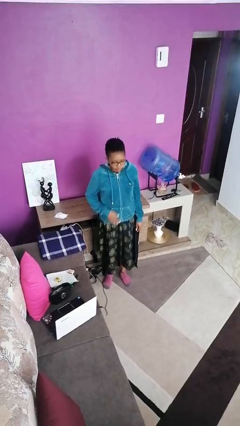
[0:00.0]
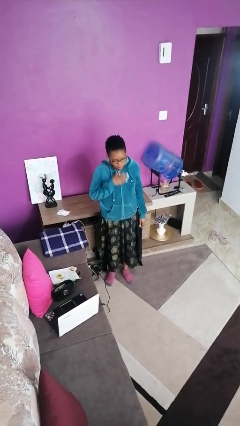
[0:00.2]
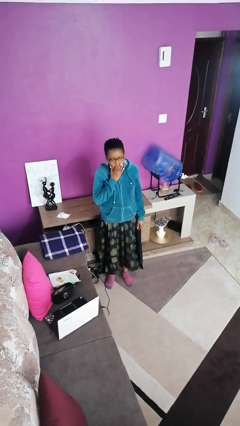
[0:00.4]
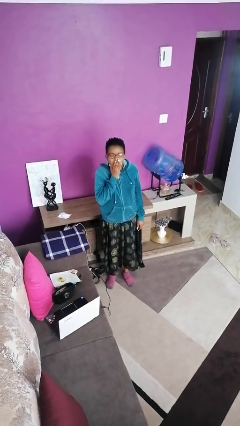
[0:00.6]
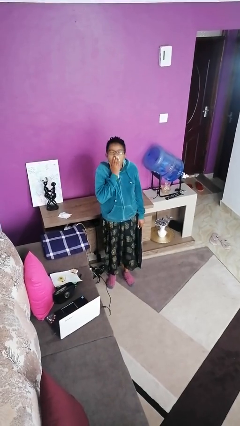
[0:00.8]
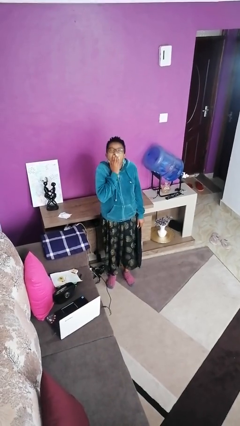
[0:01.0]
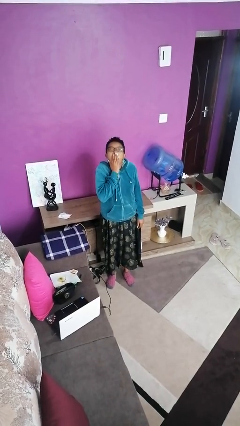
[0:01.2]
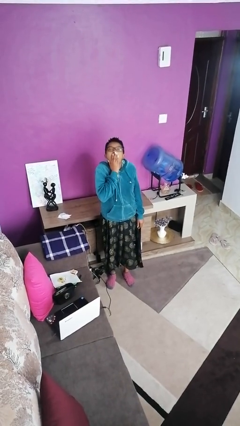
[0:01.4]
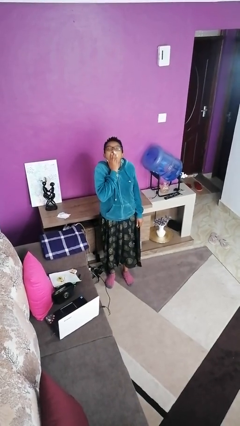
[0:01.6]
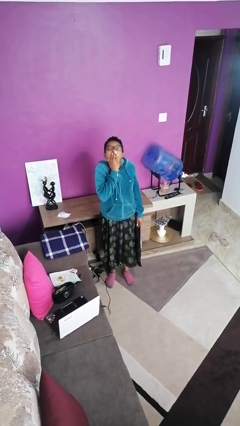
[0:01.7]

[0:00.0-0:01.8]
person closes cabinet

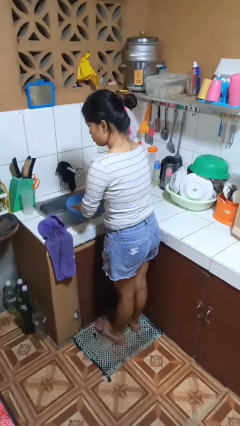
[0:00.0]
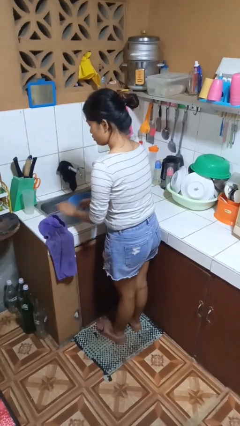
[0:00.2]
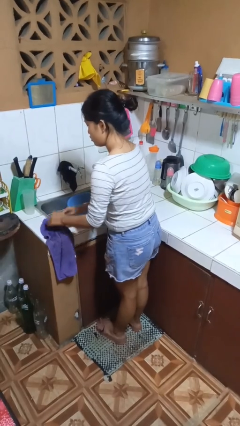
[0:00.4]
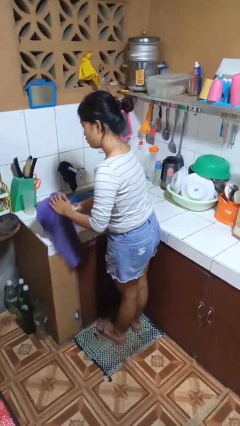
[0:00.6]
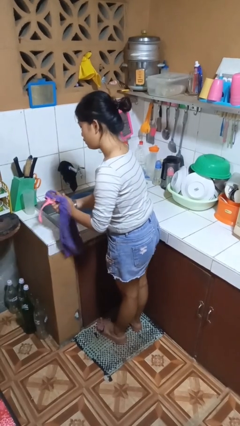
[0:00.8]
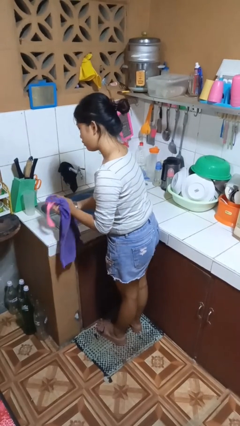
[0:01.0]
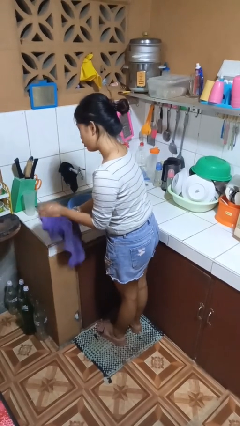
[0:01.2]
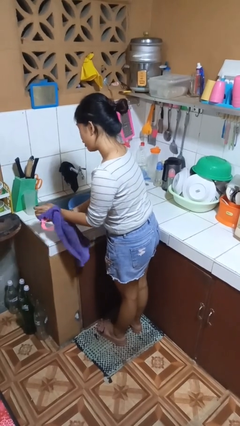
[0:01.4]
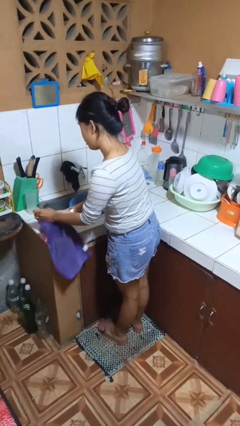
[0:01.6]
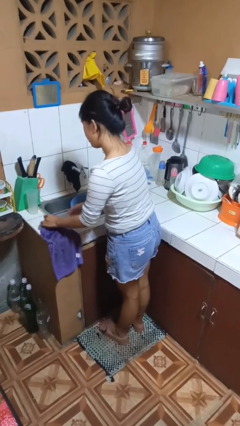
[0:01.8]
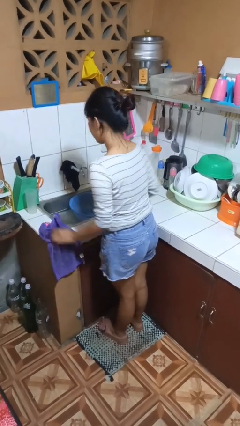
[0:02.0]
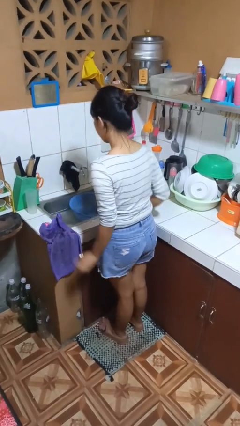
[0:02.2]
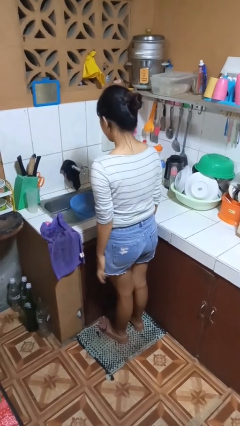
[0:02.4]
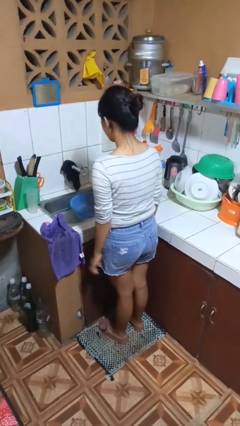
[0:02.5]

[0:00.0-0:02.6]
person dries hands with towel

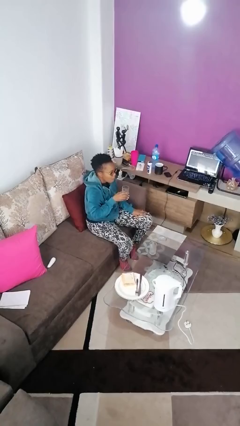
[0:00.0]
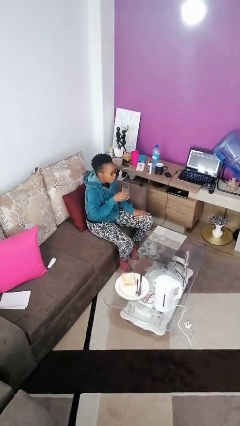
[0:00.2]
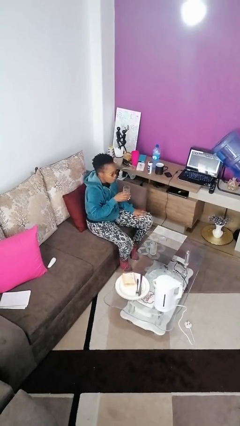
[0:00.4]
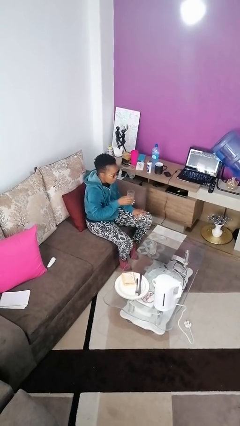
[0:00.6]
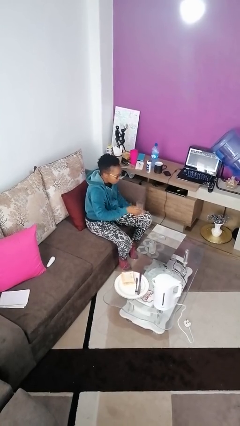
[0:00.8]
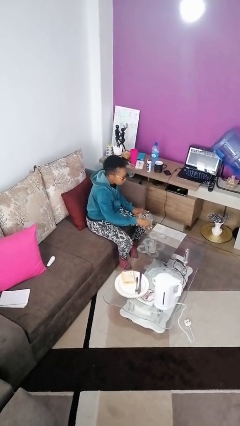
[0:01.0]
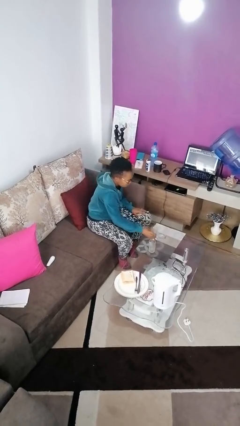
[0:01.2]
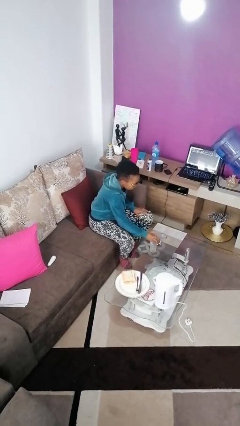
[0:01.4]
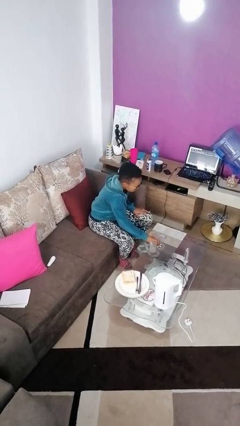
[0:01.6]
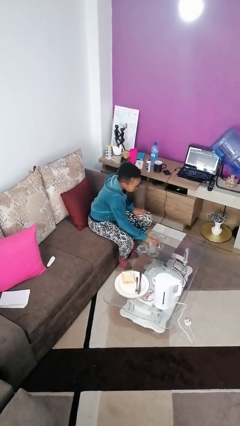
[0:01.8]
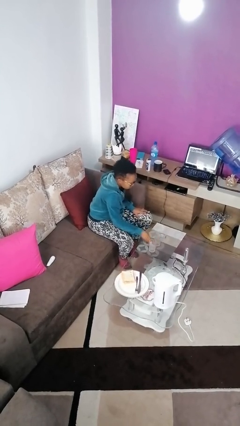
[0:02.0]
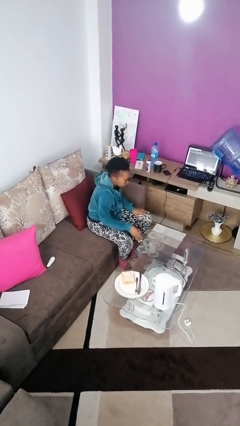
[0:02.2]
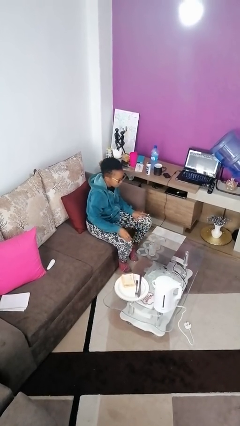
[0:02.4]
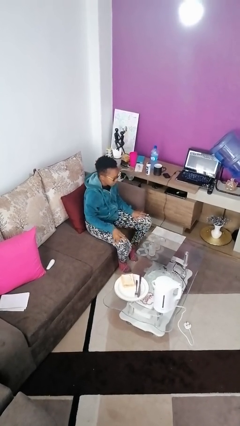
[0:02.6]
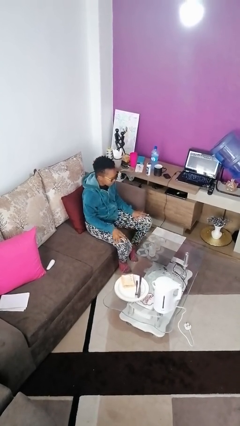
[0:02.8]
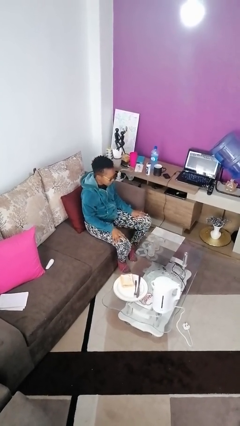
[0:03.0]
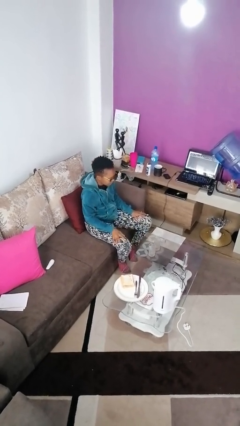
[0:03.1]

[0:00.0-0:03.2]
person puts down object on table

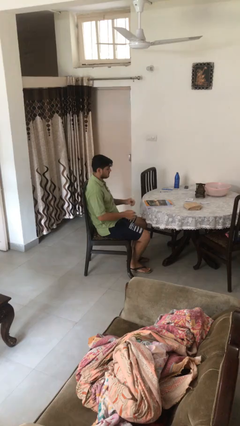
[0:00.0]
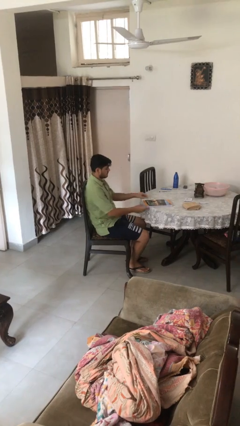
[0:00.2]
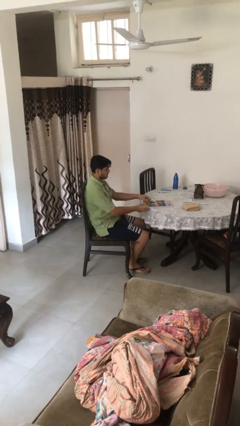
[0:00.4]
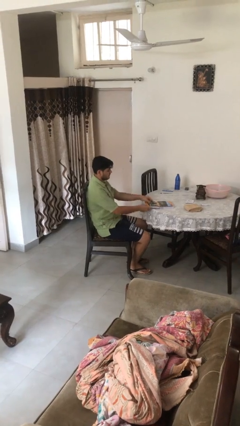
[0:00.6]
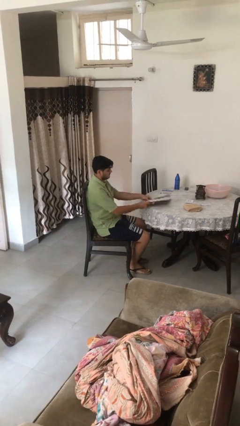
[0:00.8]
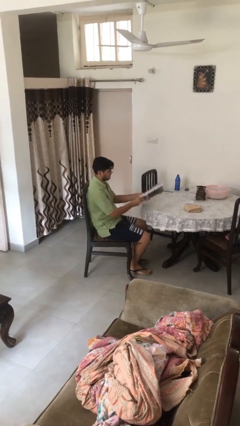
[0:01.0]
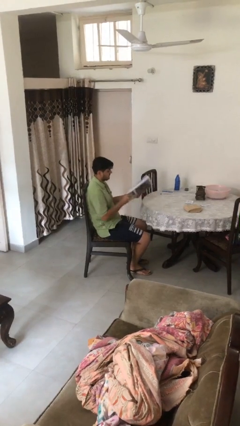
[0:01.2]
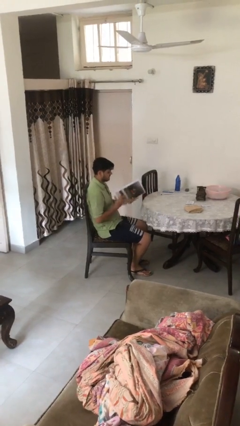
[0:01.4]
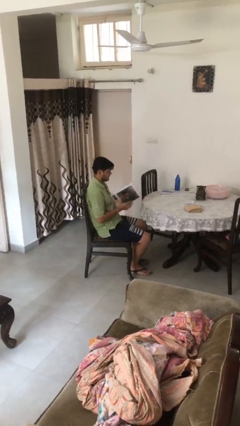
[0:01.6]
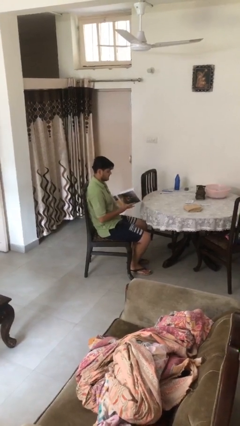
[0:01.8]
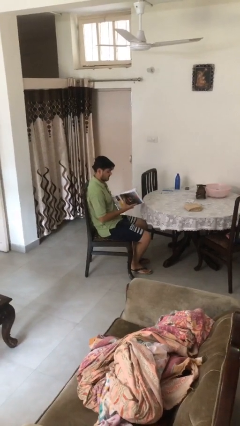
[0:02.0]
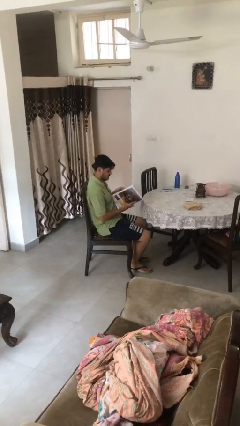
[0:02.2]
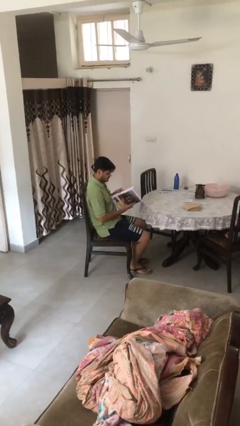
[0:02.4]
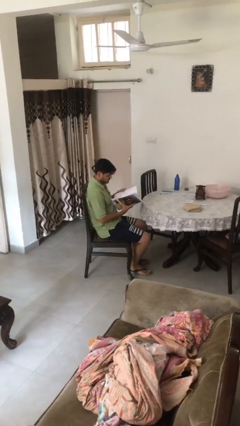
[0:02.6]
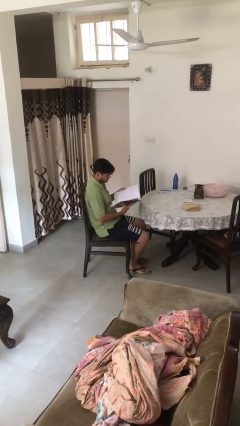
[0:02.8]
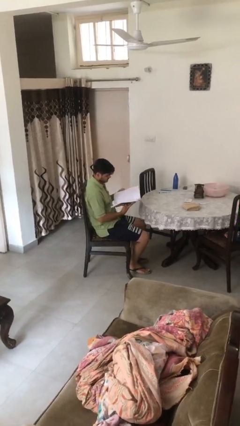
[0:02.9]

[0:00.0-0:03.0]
person picks up object from table

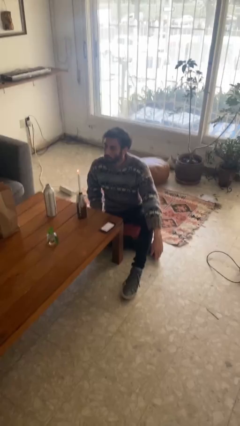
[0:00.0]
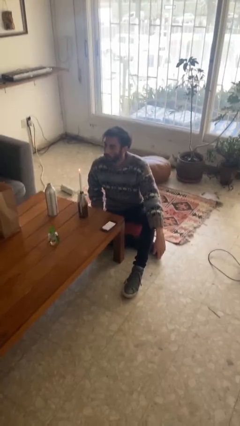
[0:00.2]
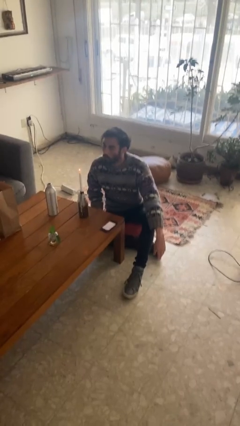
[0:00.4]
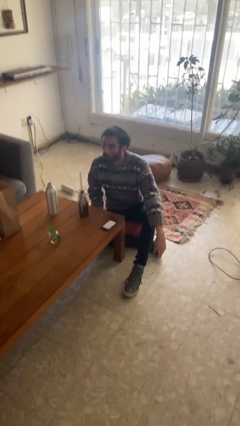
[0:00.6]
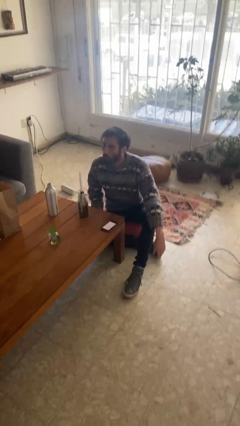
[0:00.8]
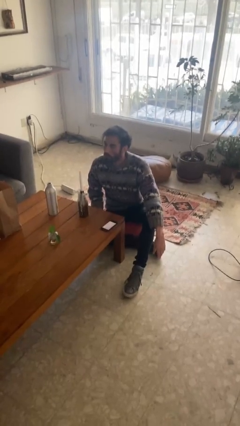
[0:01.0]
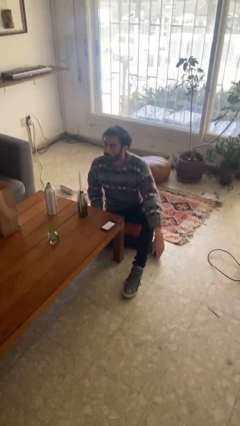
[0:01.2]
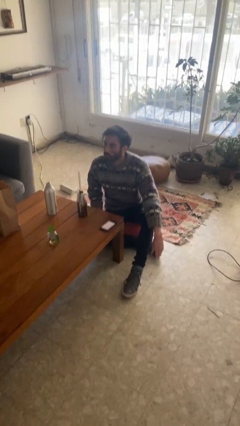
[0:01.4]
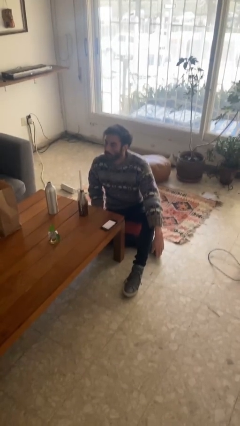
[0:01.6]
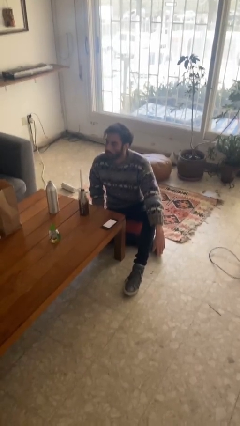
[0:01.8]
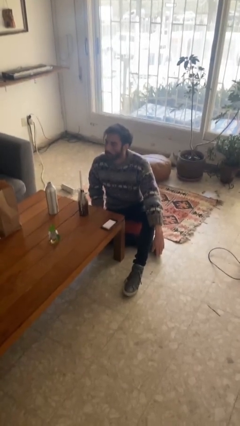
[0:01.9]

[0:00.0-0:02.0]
person extinguishes candle

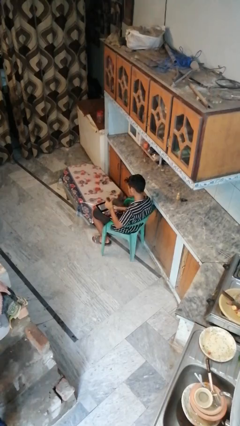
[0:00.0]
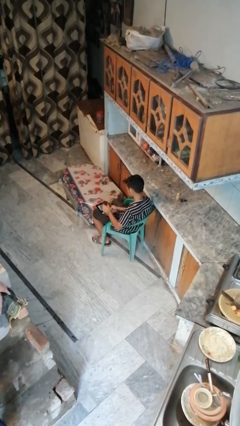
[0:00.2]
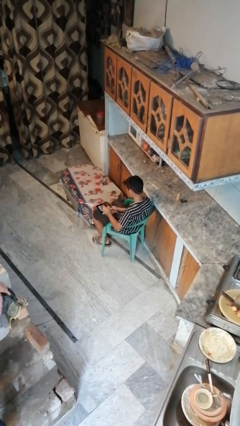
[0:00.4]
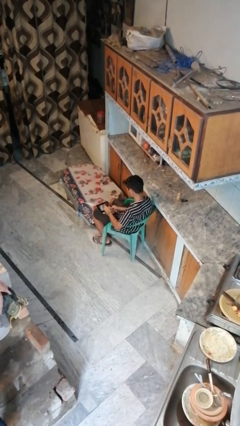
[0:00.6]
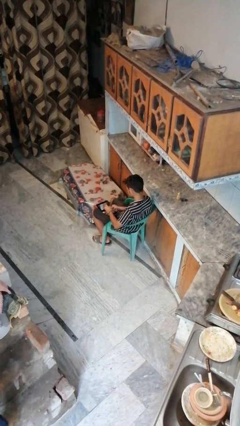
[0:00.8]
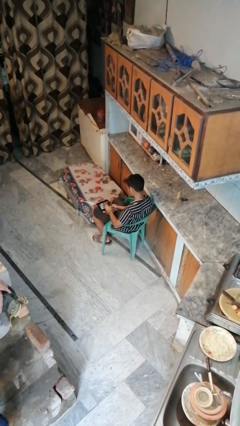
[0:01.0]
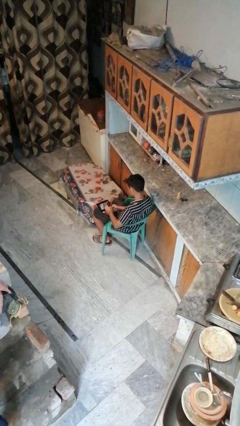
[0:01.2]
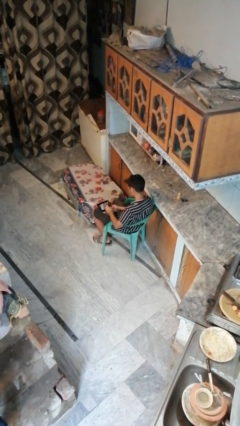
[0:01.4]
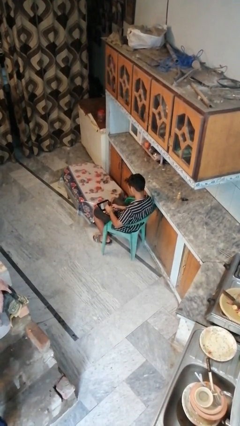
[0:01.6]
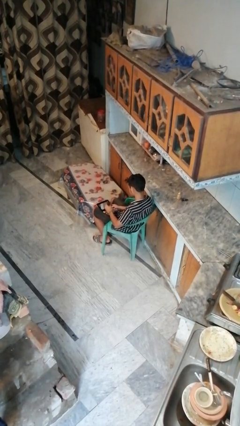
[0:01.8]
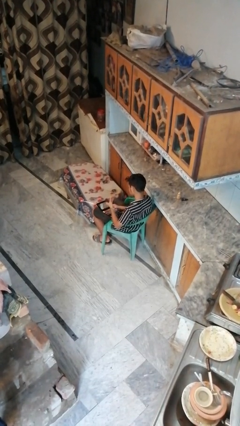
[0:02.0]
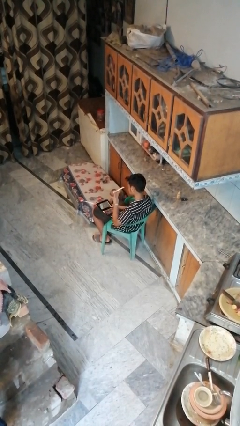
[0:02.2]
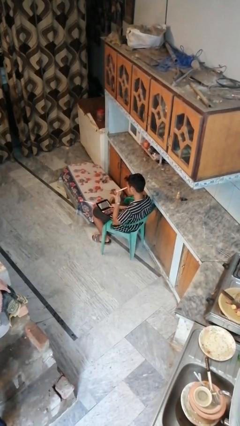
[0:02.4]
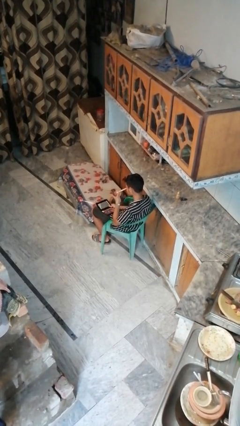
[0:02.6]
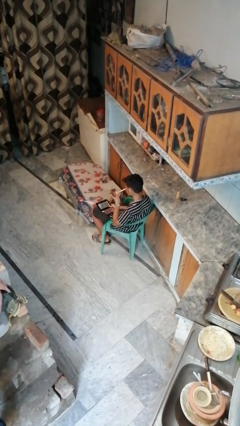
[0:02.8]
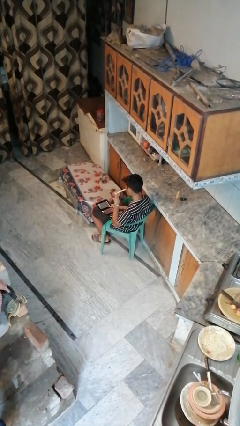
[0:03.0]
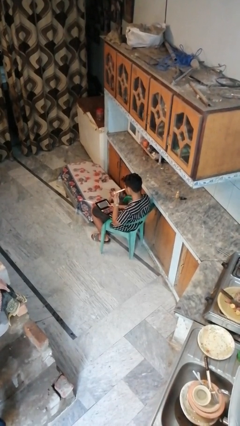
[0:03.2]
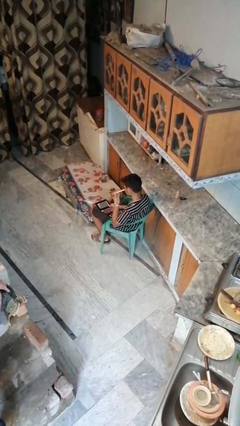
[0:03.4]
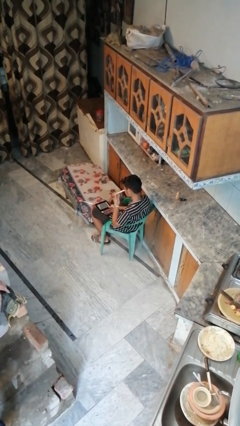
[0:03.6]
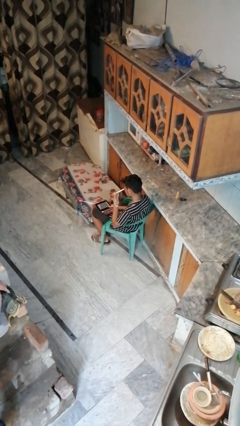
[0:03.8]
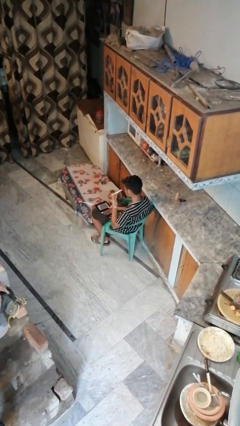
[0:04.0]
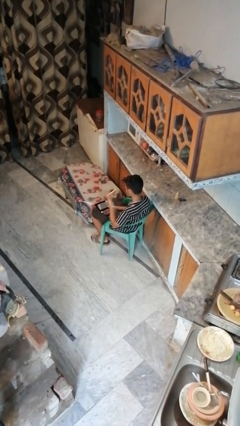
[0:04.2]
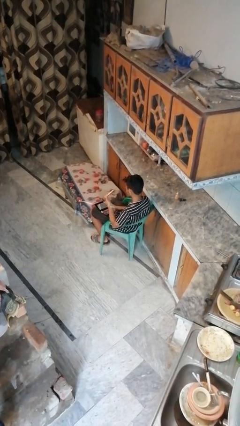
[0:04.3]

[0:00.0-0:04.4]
person applies eye makeup

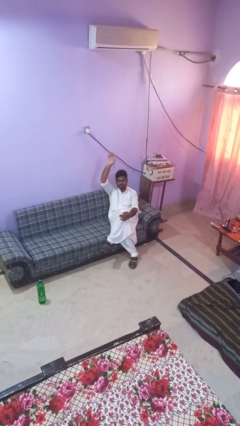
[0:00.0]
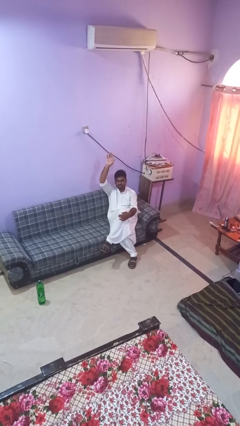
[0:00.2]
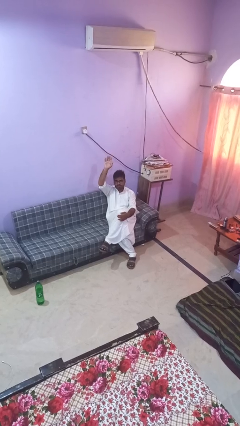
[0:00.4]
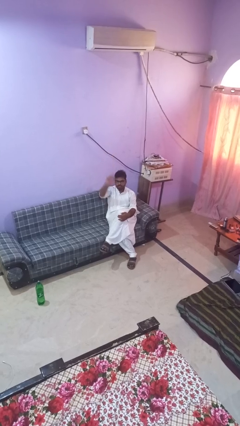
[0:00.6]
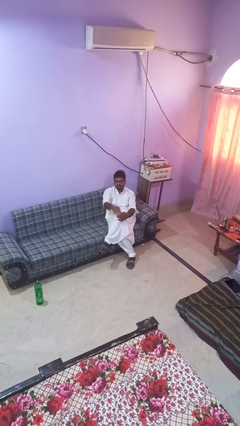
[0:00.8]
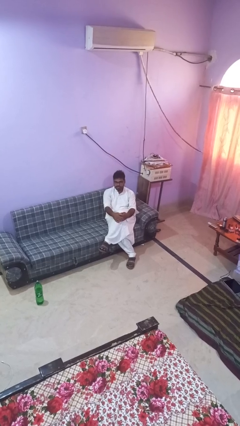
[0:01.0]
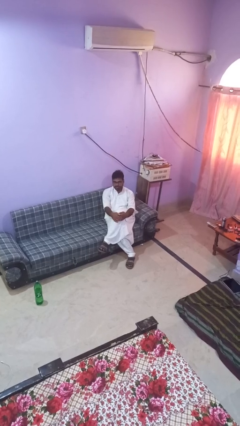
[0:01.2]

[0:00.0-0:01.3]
person gestures lower hand
